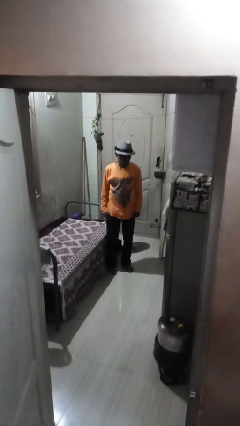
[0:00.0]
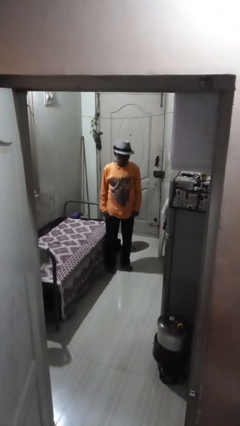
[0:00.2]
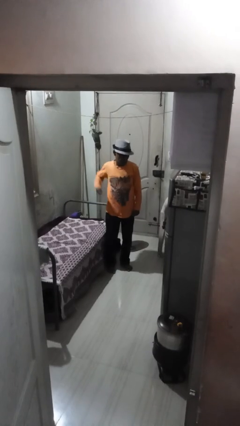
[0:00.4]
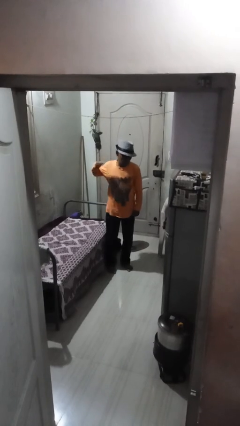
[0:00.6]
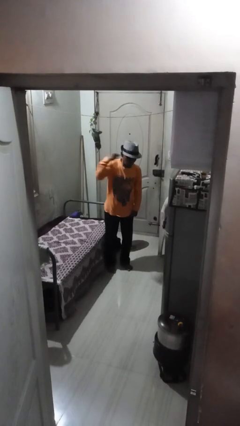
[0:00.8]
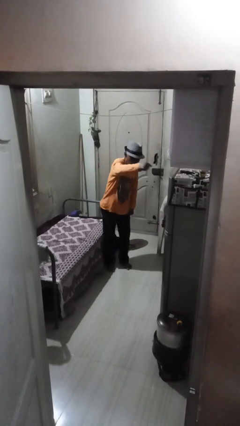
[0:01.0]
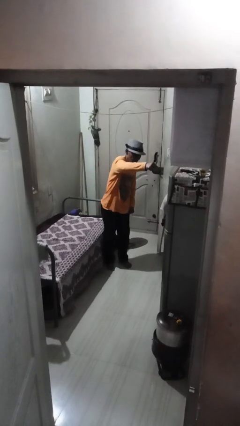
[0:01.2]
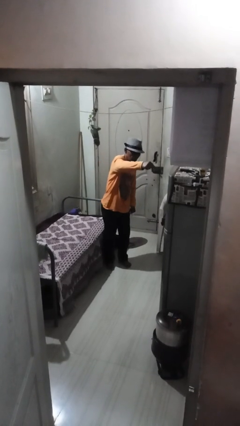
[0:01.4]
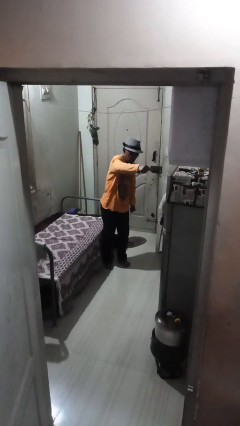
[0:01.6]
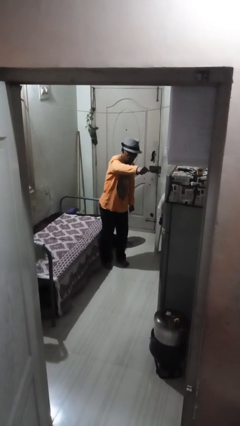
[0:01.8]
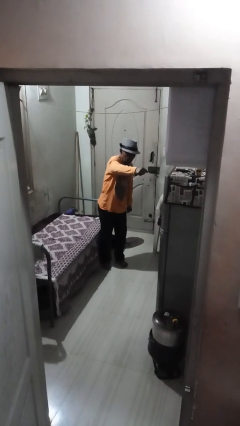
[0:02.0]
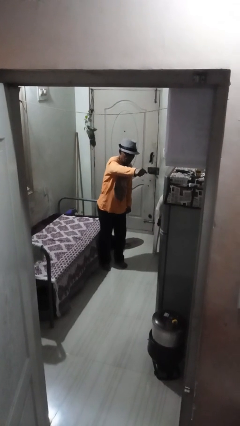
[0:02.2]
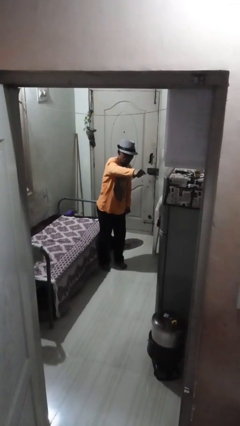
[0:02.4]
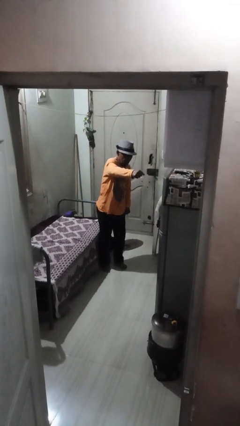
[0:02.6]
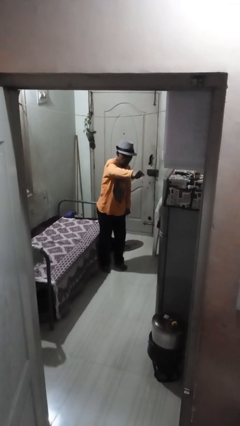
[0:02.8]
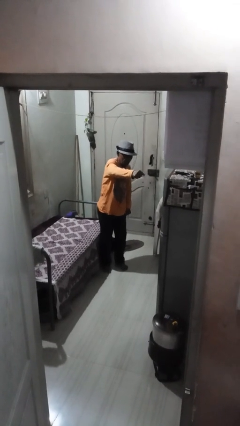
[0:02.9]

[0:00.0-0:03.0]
person punches

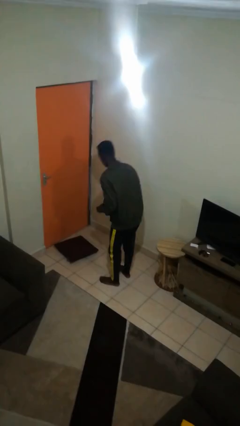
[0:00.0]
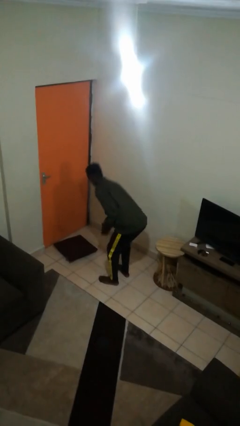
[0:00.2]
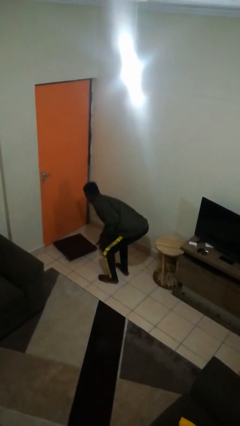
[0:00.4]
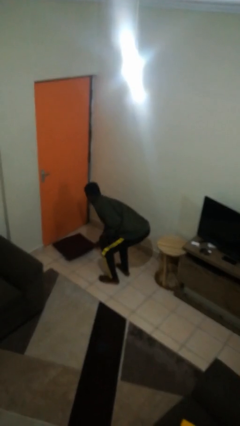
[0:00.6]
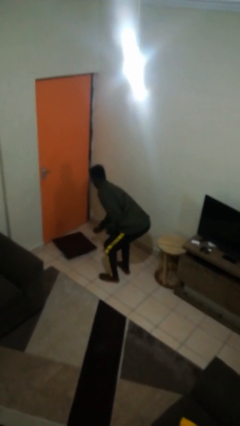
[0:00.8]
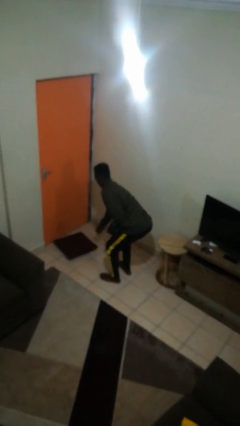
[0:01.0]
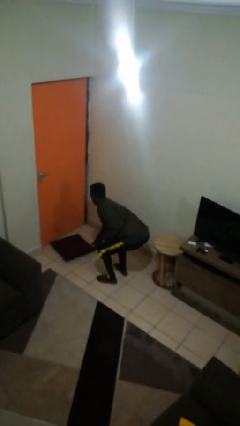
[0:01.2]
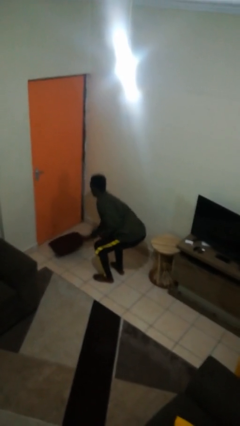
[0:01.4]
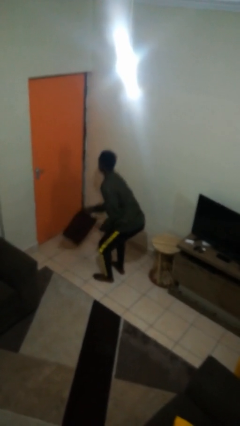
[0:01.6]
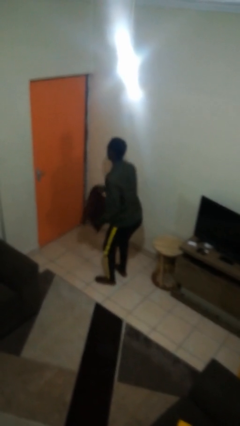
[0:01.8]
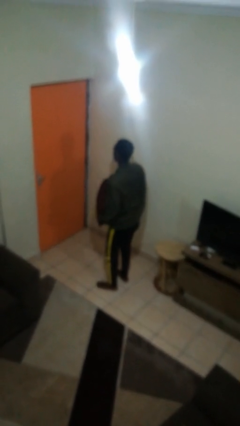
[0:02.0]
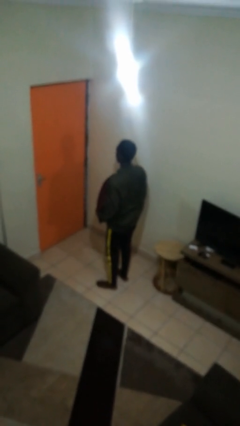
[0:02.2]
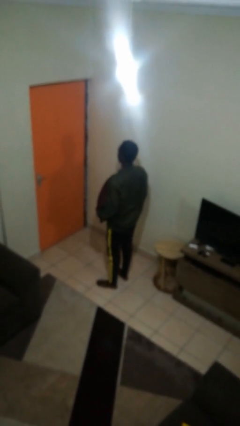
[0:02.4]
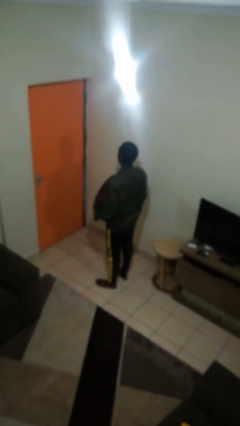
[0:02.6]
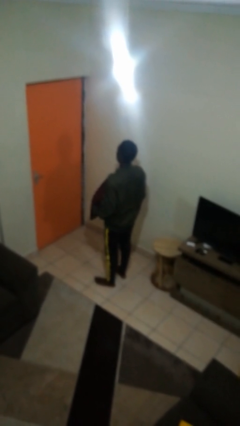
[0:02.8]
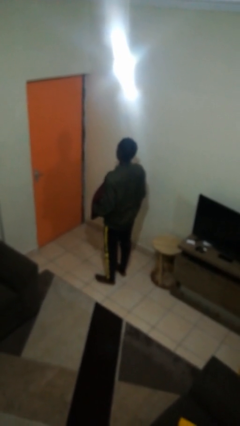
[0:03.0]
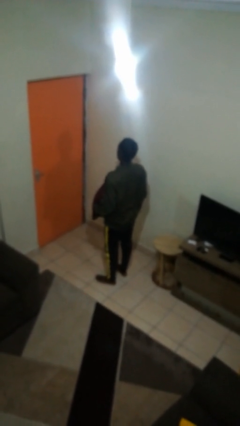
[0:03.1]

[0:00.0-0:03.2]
person picks up object from floor

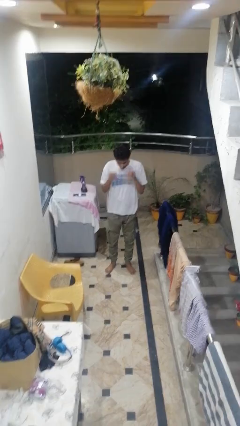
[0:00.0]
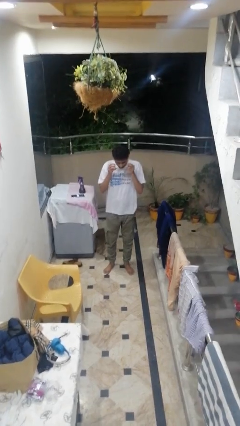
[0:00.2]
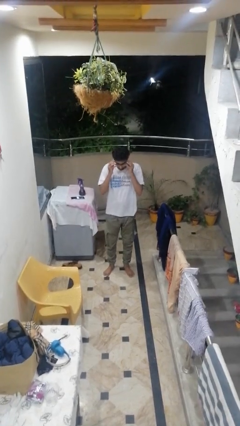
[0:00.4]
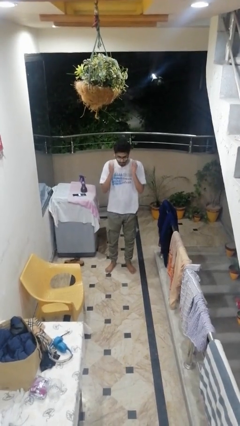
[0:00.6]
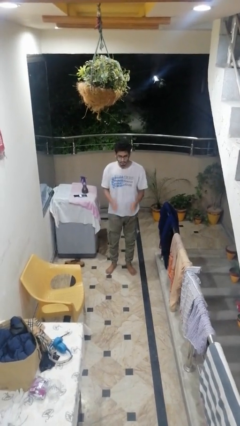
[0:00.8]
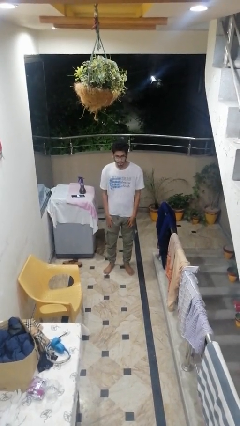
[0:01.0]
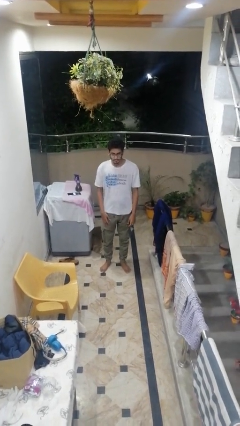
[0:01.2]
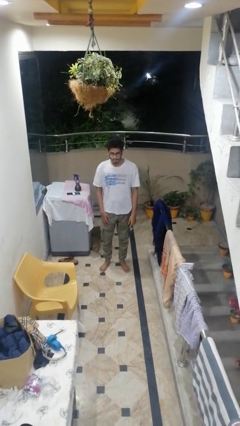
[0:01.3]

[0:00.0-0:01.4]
person puts on glasses

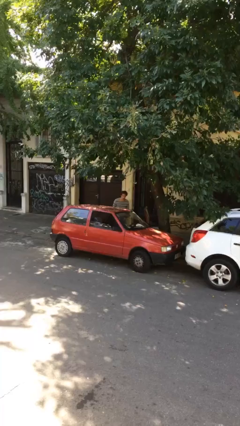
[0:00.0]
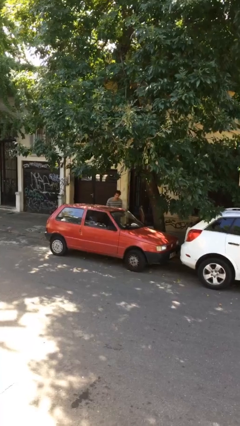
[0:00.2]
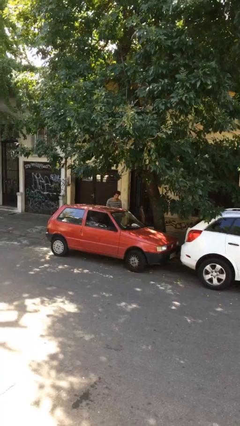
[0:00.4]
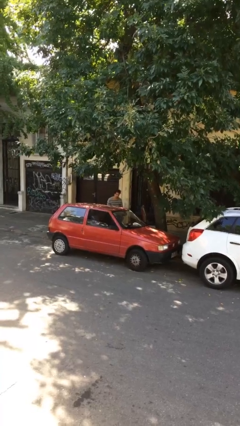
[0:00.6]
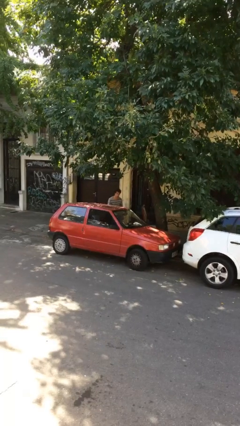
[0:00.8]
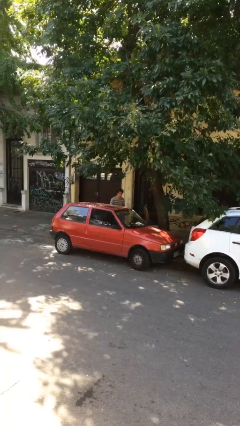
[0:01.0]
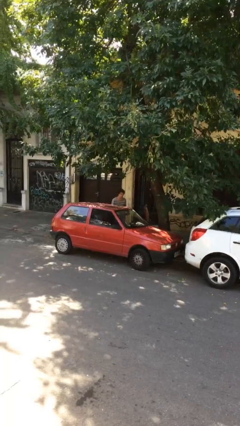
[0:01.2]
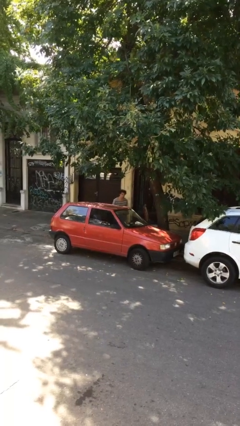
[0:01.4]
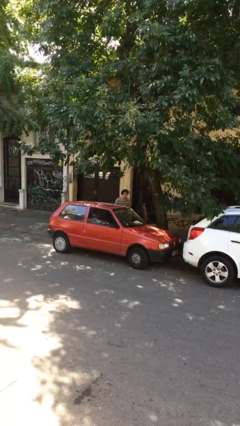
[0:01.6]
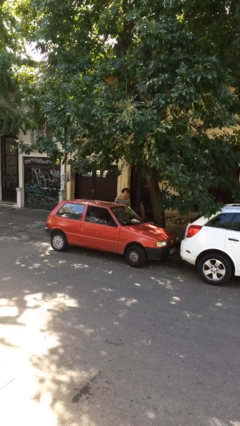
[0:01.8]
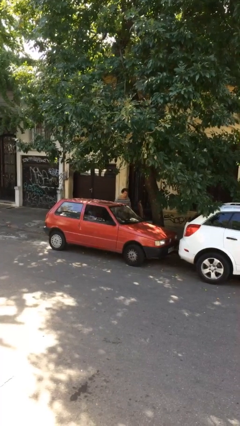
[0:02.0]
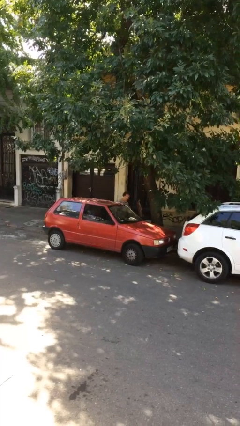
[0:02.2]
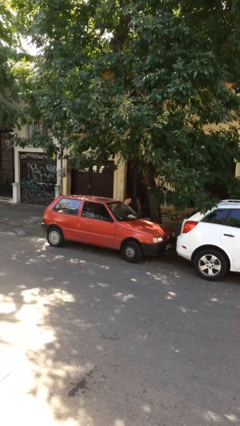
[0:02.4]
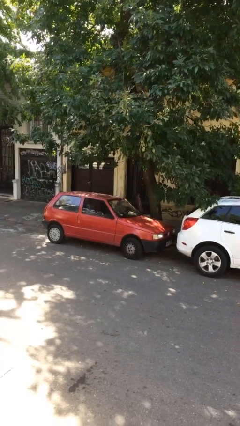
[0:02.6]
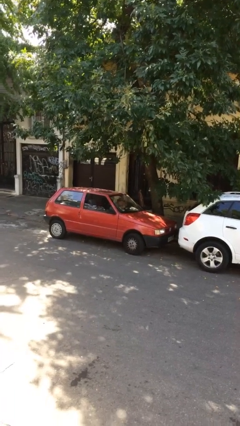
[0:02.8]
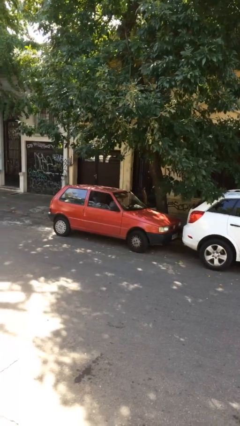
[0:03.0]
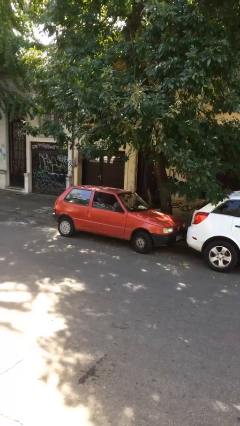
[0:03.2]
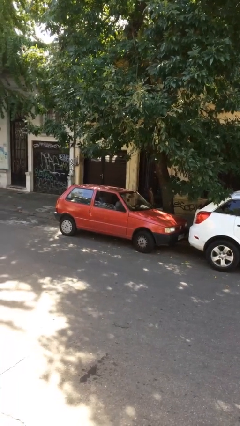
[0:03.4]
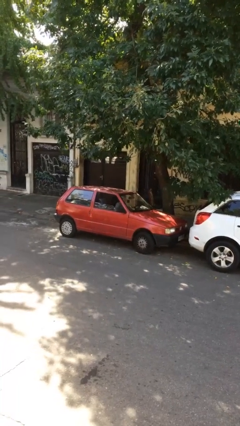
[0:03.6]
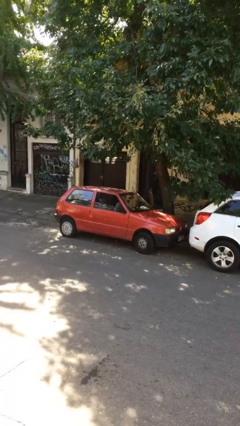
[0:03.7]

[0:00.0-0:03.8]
person enters car

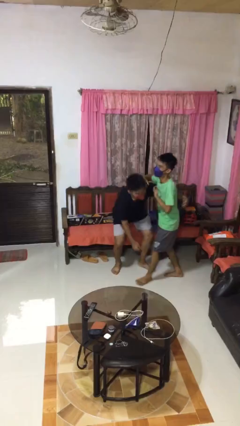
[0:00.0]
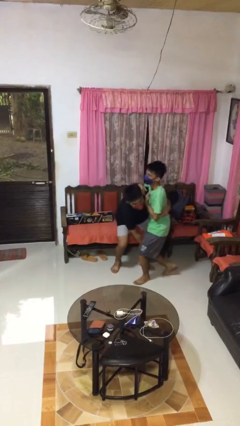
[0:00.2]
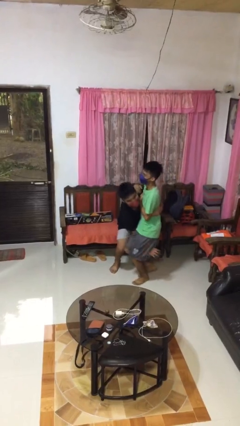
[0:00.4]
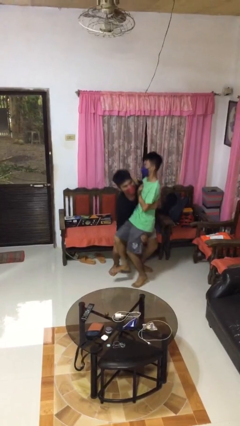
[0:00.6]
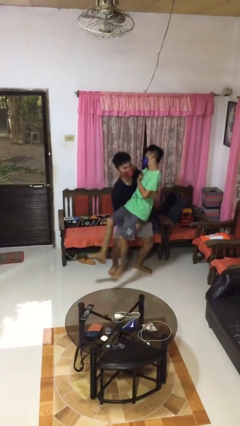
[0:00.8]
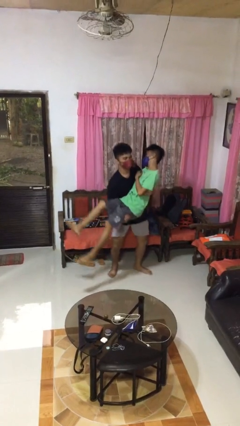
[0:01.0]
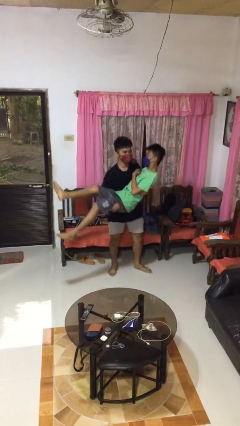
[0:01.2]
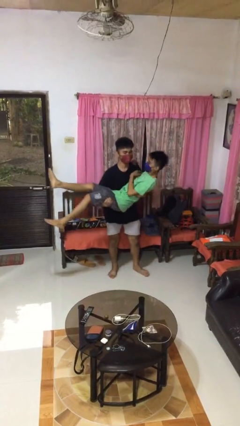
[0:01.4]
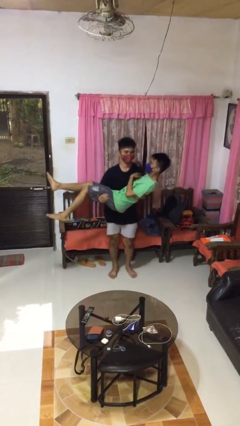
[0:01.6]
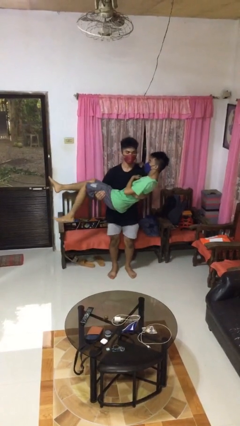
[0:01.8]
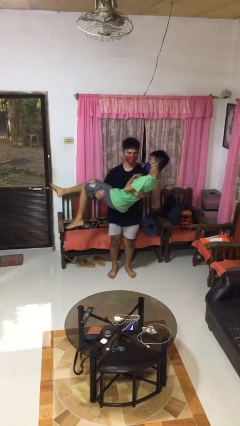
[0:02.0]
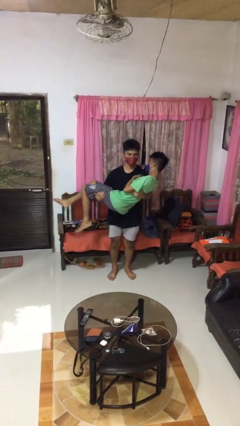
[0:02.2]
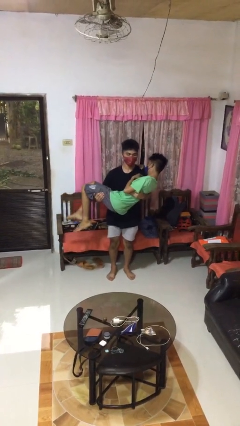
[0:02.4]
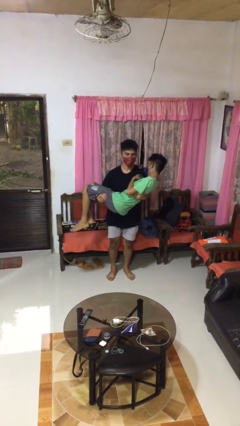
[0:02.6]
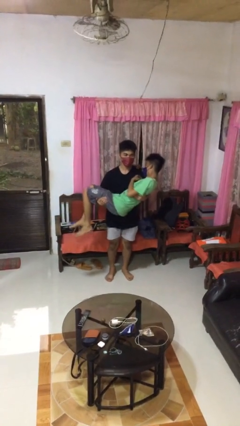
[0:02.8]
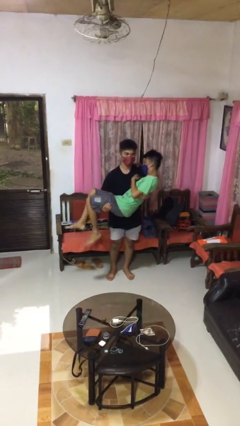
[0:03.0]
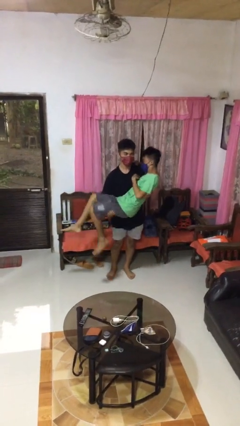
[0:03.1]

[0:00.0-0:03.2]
person picks up person

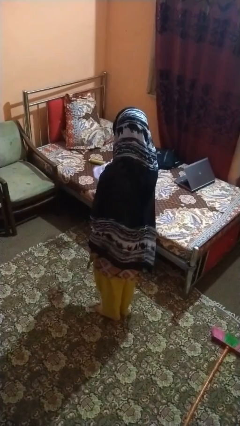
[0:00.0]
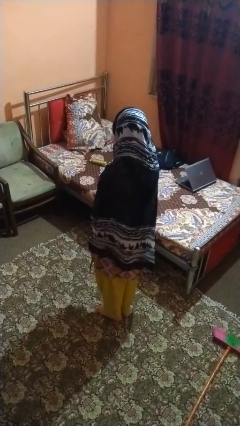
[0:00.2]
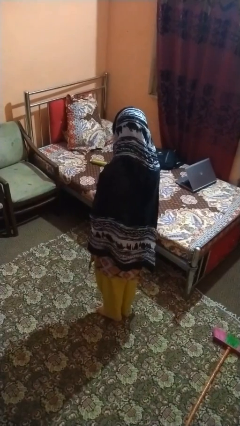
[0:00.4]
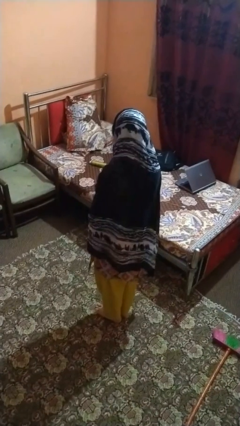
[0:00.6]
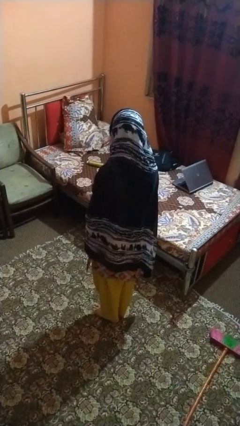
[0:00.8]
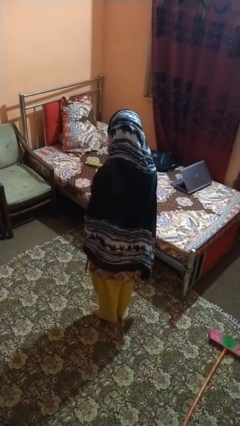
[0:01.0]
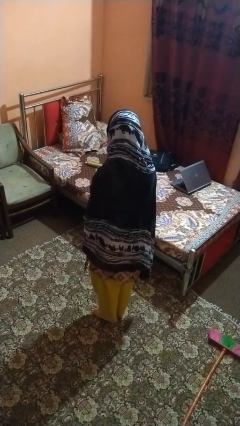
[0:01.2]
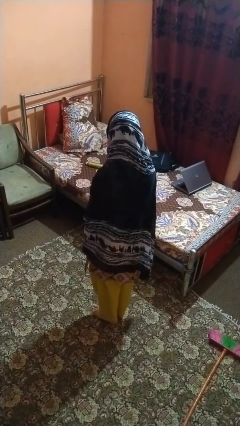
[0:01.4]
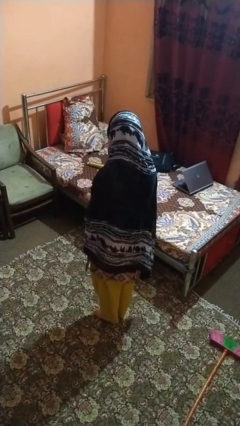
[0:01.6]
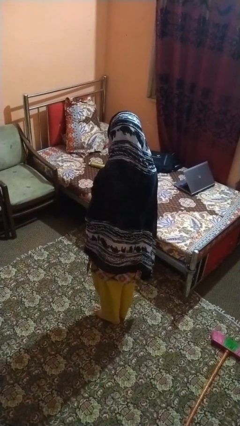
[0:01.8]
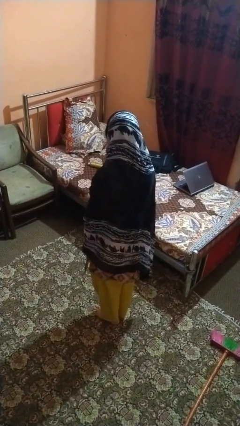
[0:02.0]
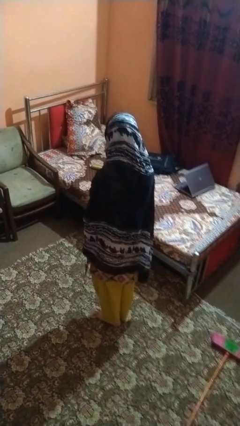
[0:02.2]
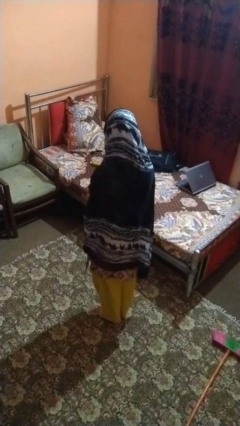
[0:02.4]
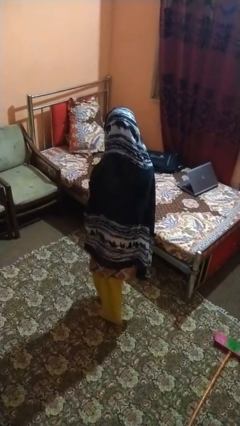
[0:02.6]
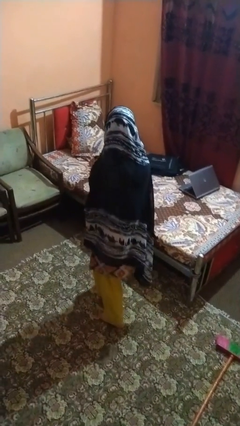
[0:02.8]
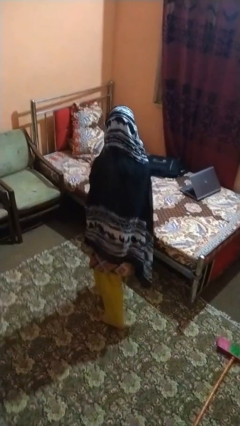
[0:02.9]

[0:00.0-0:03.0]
person throws object on bed
